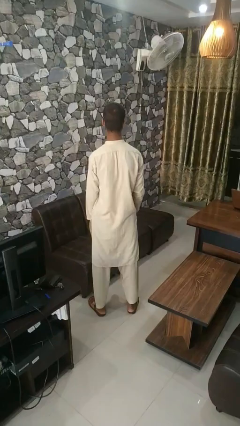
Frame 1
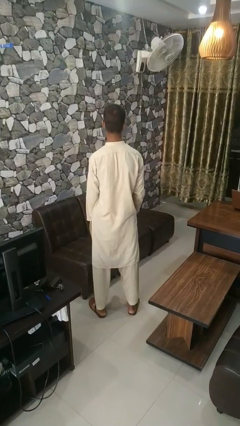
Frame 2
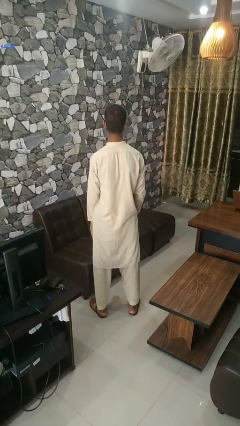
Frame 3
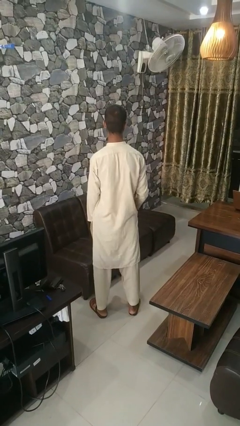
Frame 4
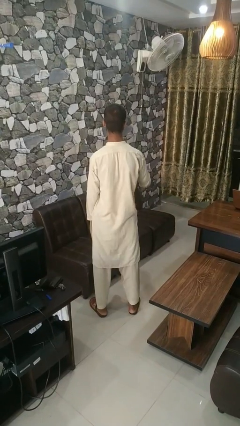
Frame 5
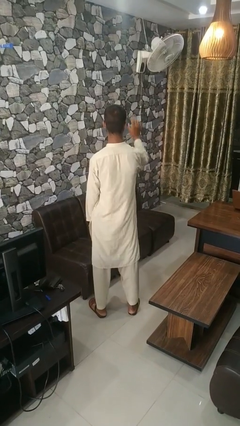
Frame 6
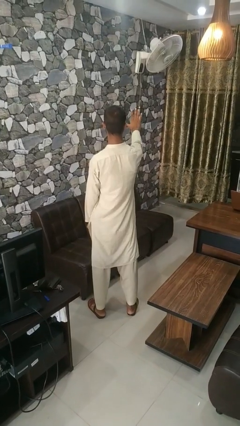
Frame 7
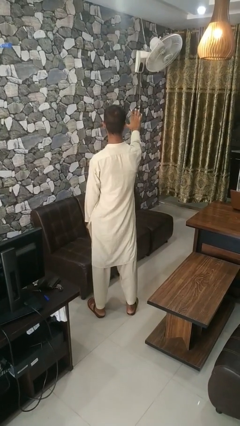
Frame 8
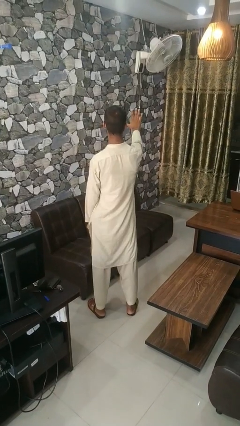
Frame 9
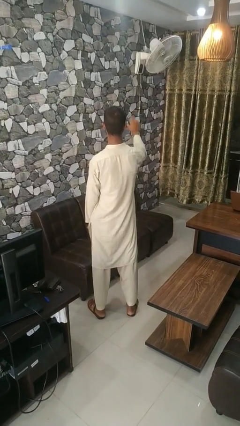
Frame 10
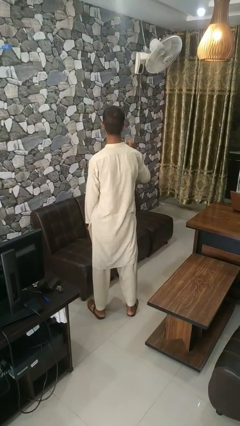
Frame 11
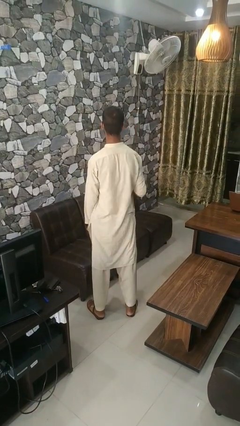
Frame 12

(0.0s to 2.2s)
person gestures number five

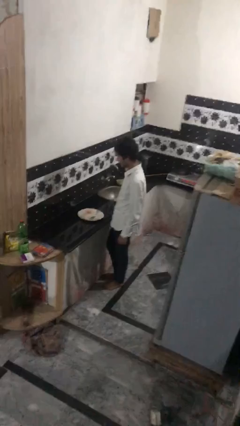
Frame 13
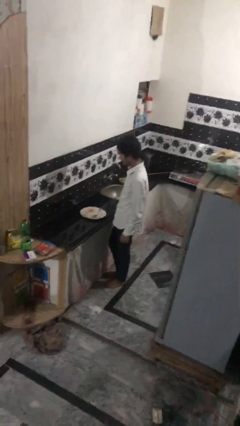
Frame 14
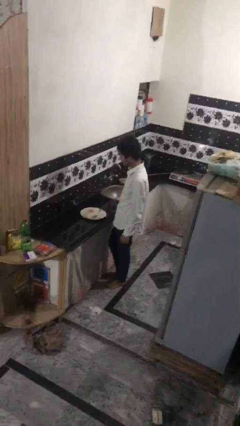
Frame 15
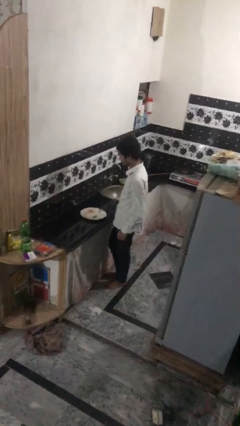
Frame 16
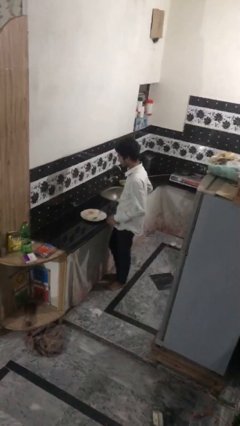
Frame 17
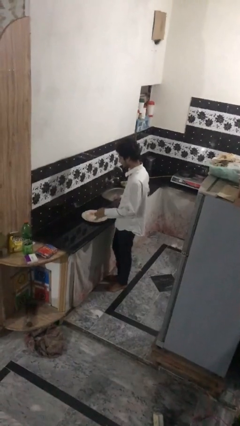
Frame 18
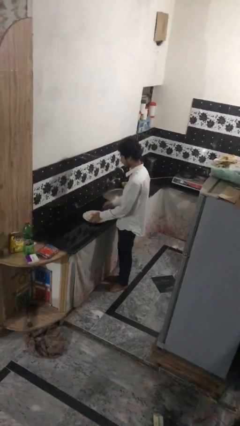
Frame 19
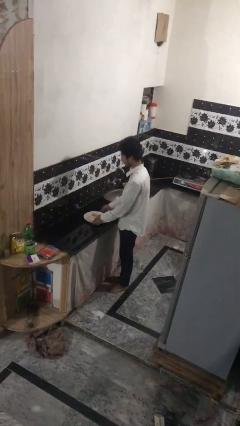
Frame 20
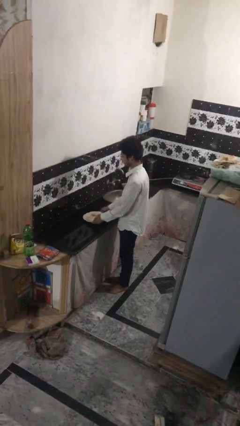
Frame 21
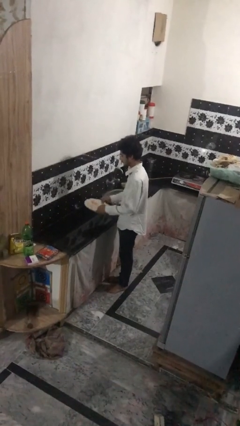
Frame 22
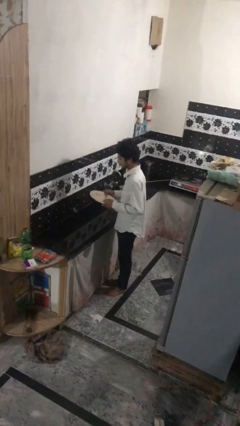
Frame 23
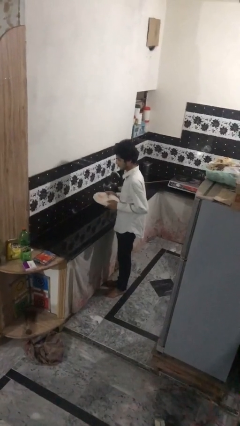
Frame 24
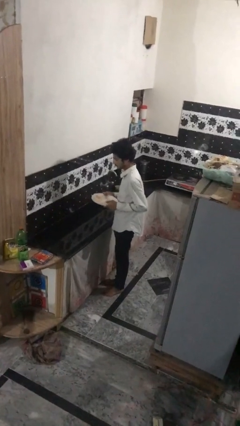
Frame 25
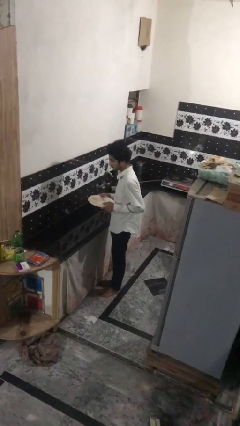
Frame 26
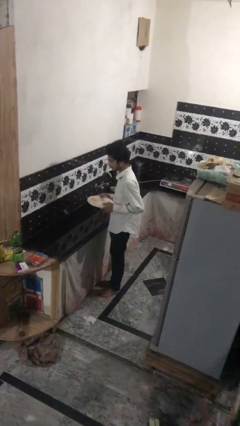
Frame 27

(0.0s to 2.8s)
person picks up object from countertop

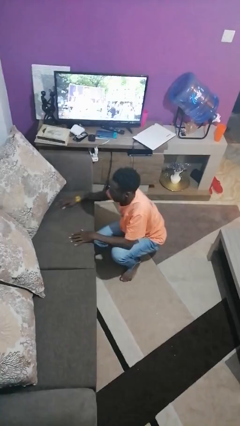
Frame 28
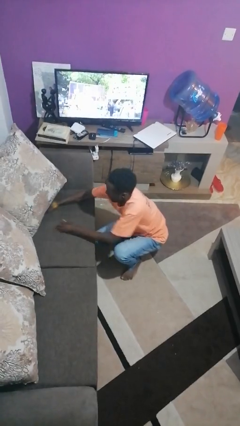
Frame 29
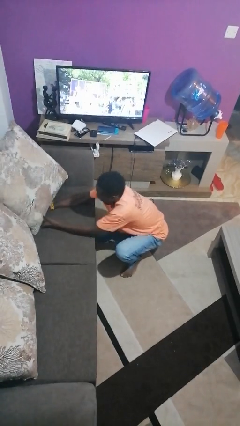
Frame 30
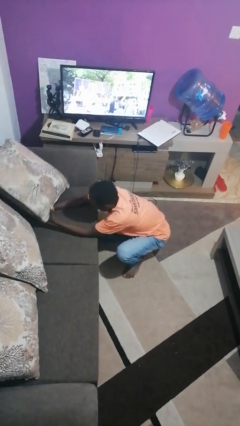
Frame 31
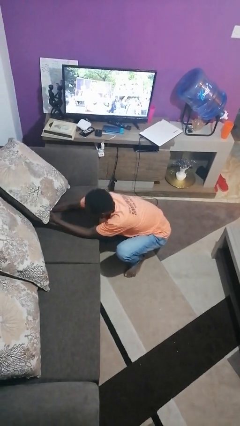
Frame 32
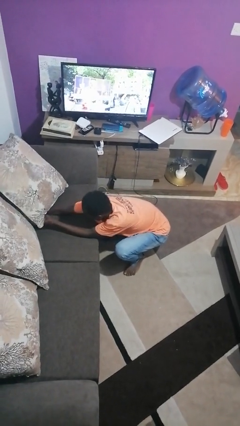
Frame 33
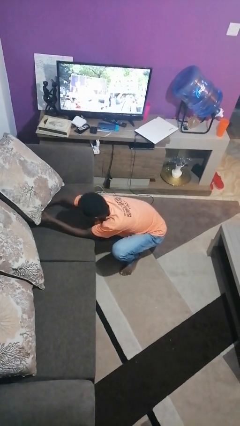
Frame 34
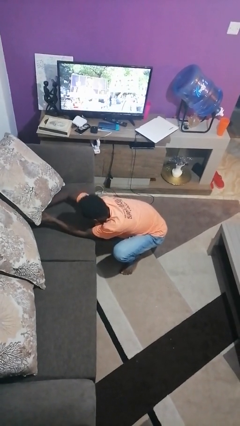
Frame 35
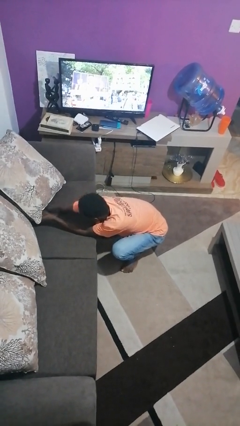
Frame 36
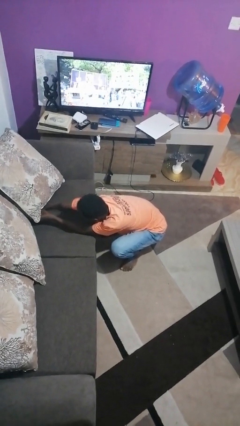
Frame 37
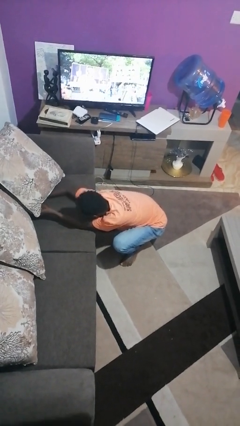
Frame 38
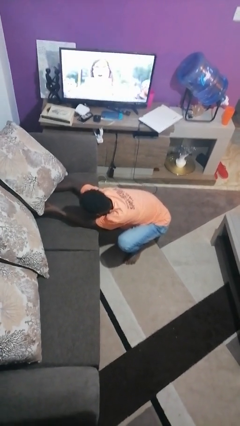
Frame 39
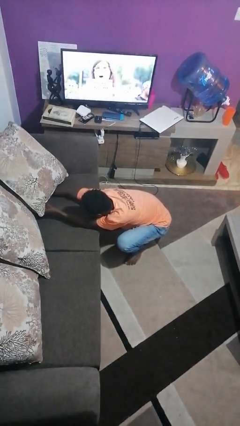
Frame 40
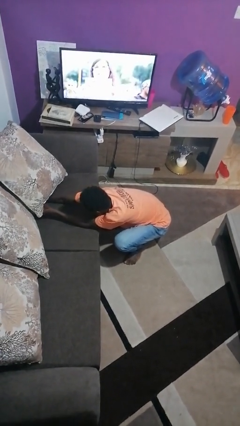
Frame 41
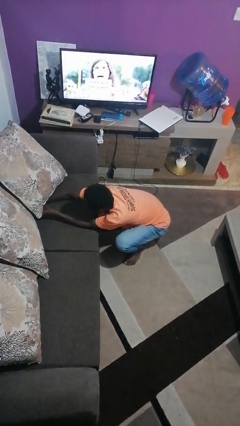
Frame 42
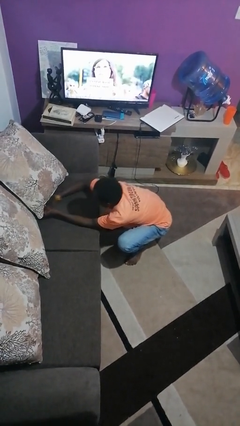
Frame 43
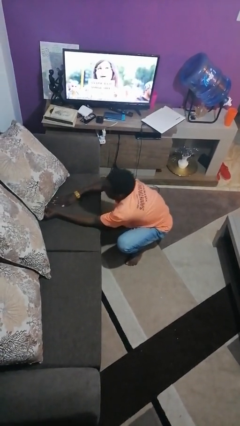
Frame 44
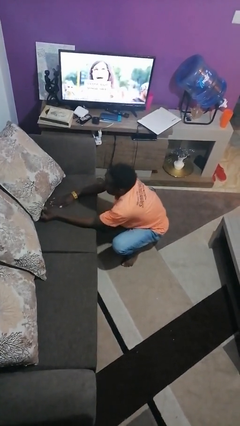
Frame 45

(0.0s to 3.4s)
person searches in couch

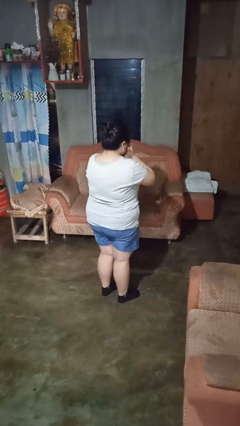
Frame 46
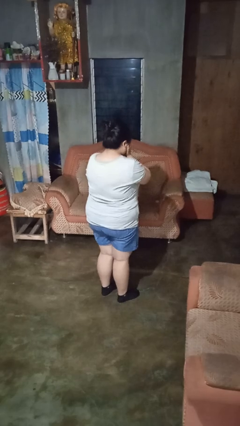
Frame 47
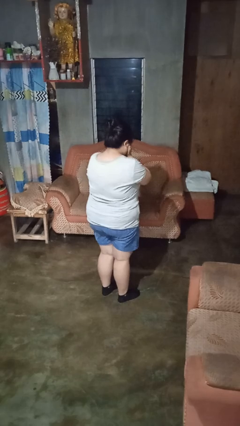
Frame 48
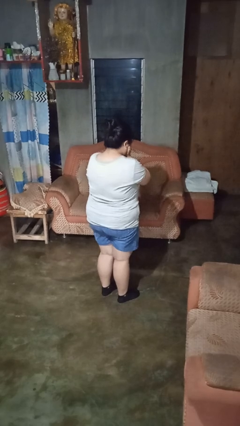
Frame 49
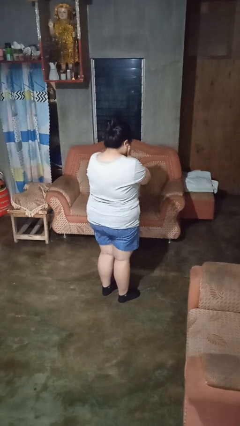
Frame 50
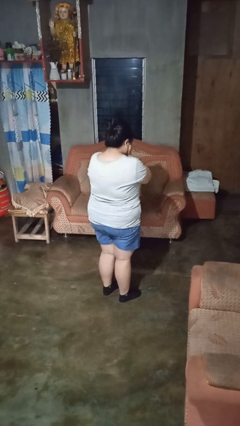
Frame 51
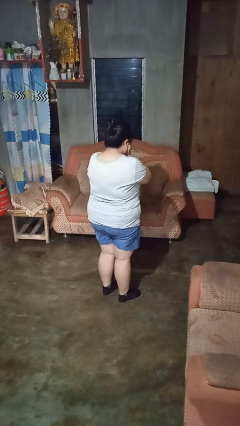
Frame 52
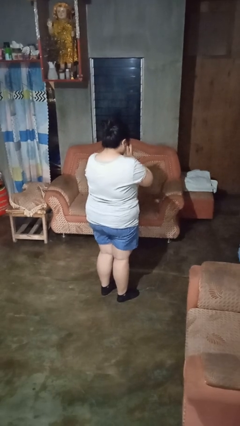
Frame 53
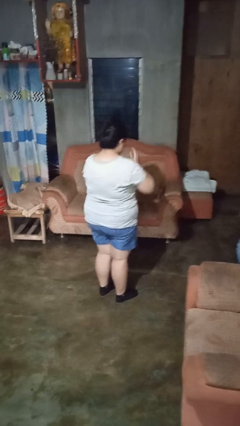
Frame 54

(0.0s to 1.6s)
person covers face with hands

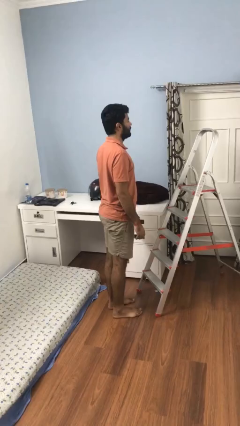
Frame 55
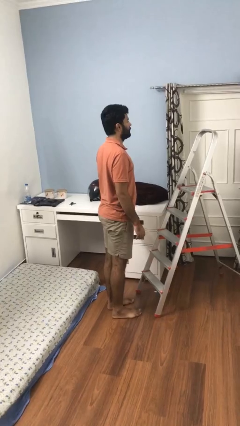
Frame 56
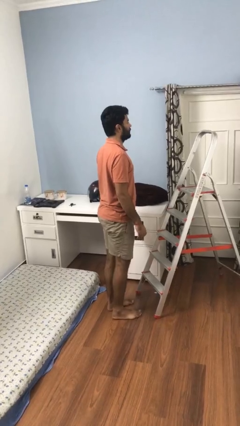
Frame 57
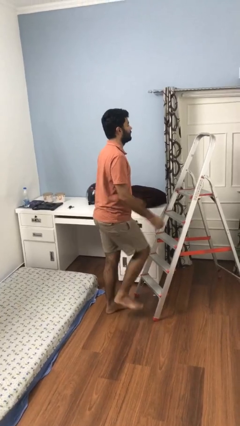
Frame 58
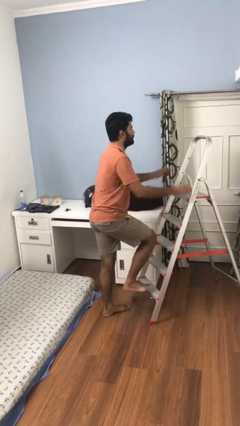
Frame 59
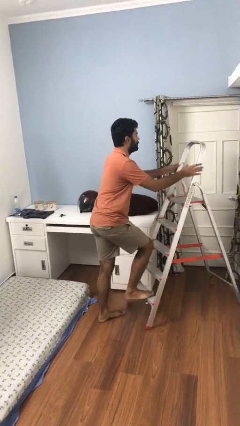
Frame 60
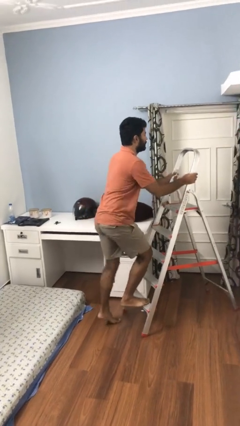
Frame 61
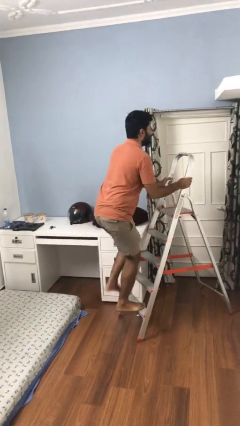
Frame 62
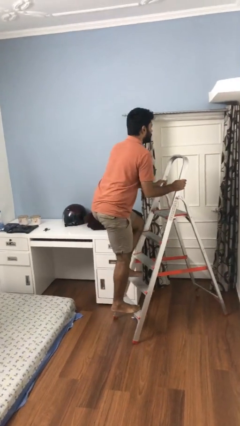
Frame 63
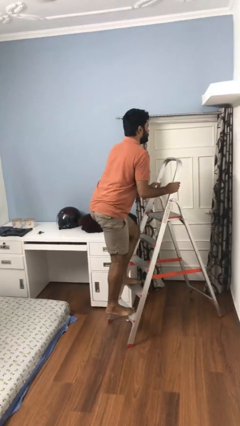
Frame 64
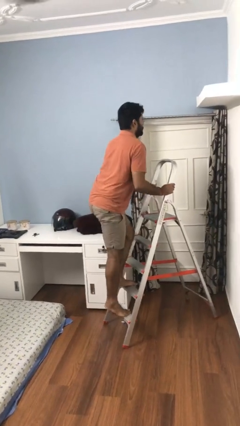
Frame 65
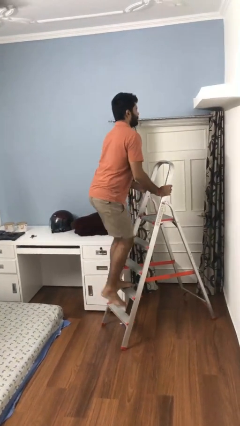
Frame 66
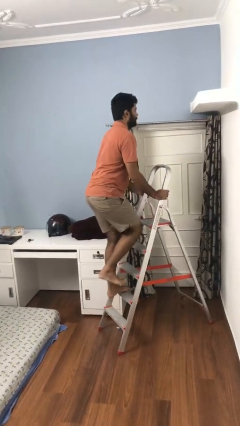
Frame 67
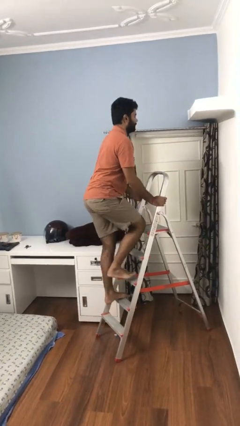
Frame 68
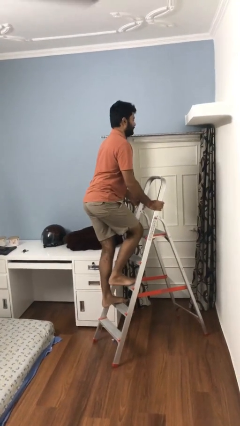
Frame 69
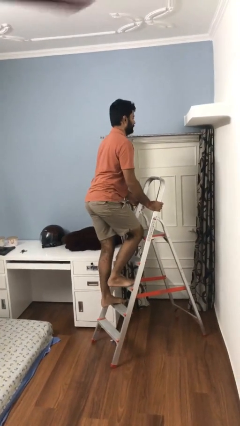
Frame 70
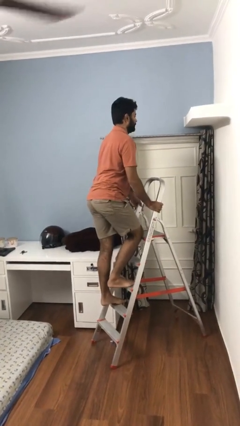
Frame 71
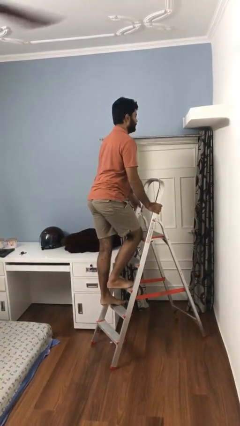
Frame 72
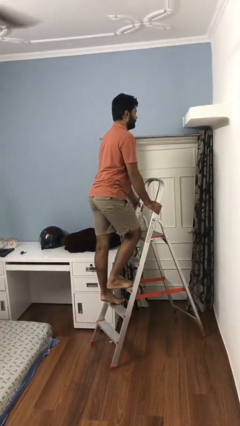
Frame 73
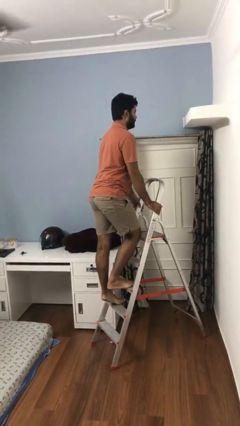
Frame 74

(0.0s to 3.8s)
person climbs up ladder

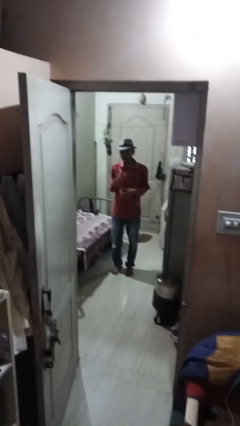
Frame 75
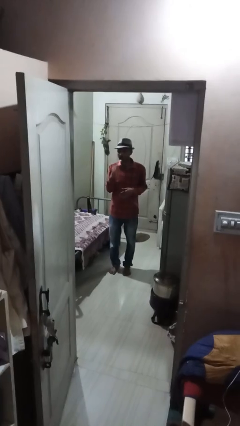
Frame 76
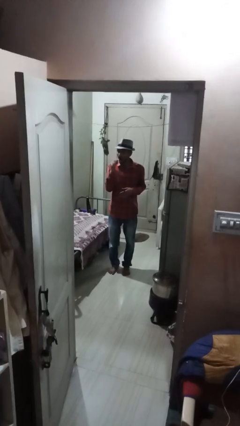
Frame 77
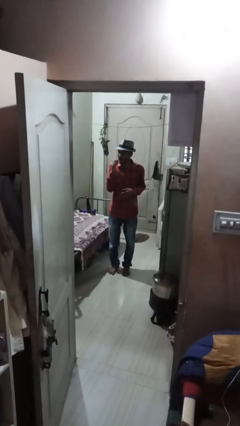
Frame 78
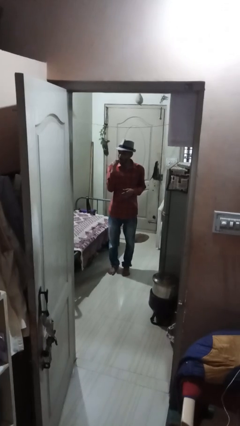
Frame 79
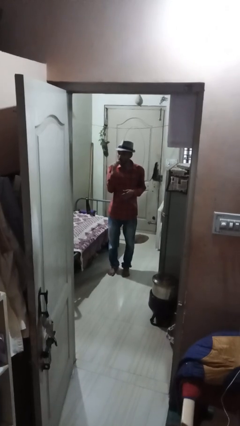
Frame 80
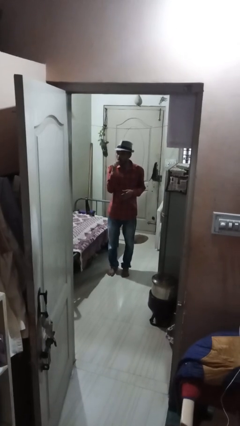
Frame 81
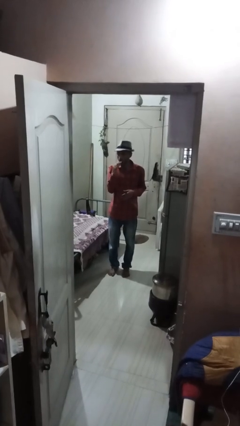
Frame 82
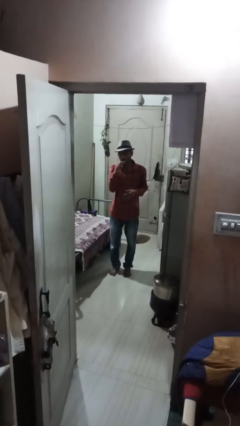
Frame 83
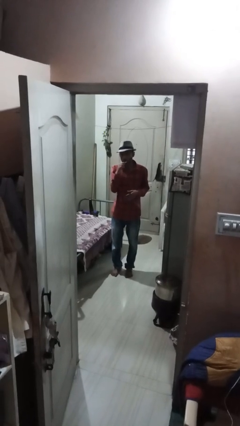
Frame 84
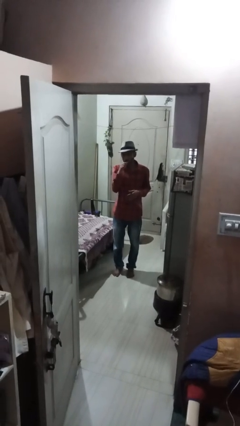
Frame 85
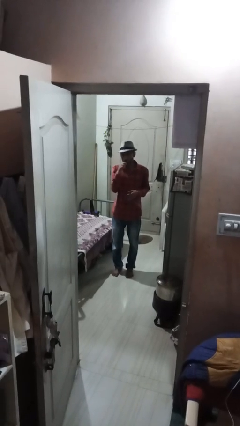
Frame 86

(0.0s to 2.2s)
person brushes teeth

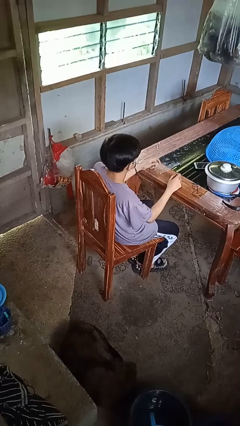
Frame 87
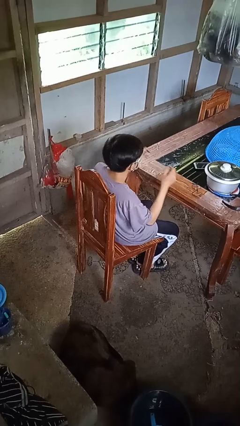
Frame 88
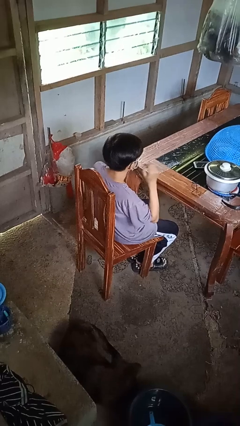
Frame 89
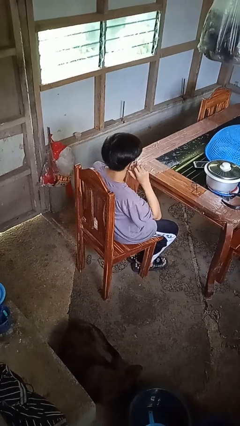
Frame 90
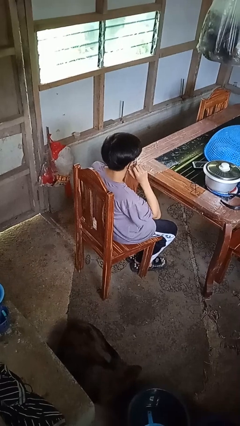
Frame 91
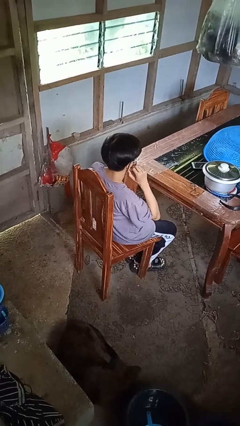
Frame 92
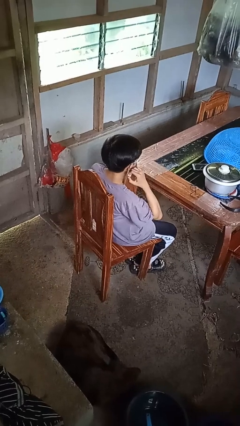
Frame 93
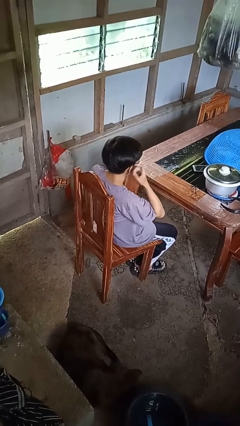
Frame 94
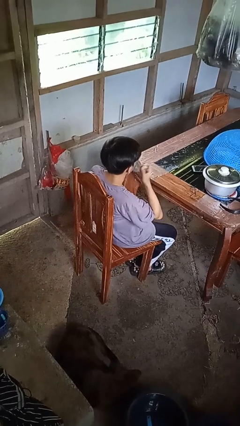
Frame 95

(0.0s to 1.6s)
person takes off facemask
